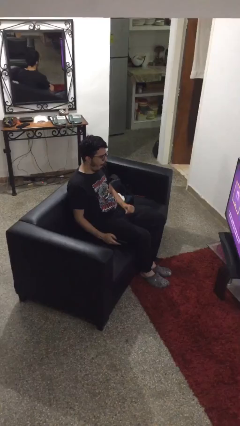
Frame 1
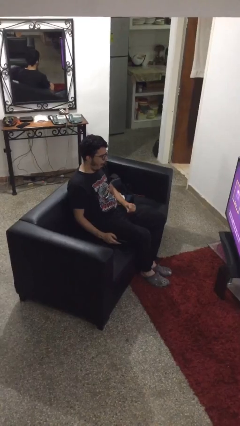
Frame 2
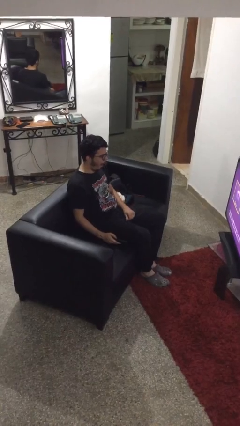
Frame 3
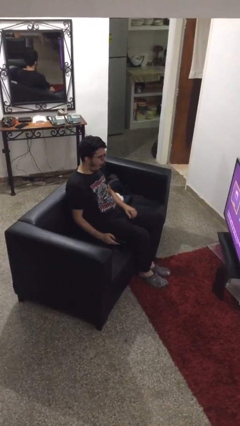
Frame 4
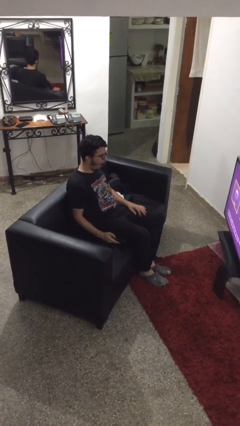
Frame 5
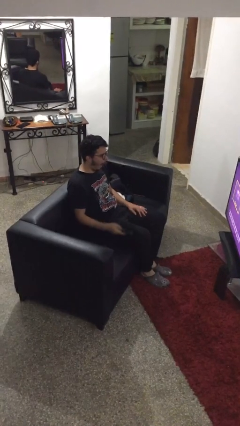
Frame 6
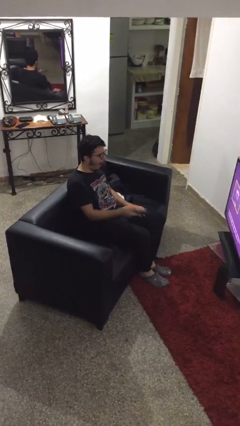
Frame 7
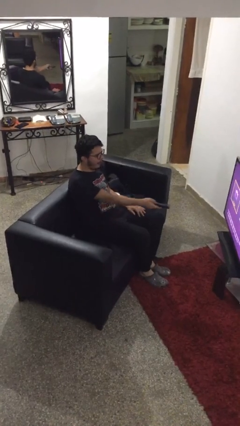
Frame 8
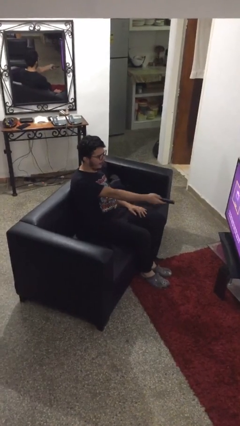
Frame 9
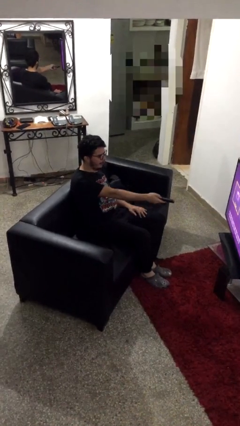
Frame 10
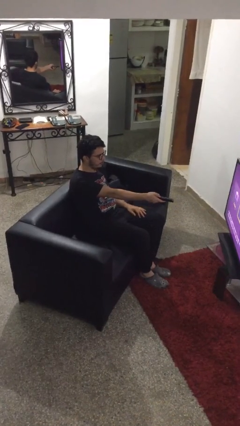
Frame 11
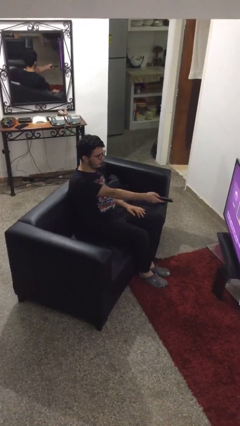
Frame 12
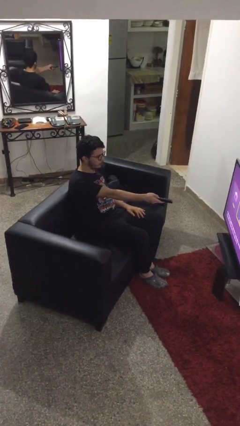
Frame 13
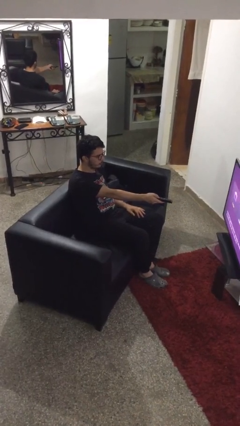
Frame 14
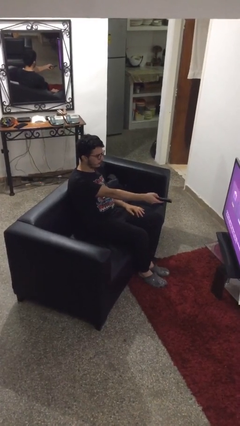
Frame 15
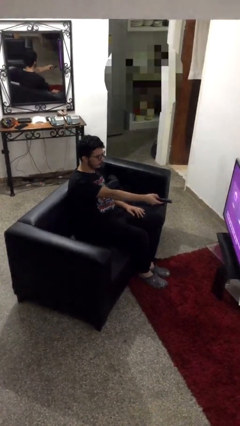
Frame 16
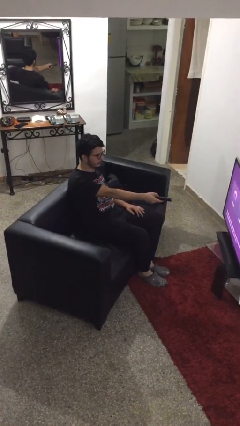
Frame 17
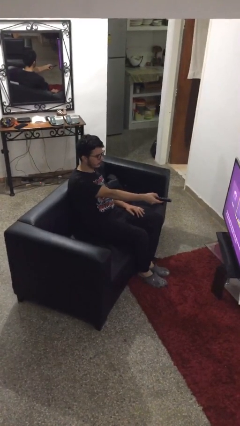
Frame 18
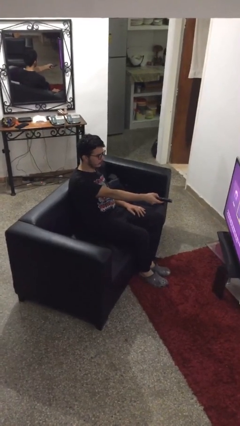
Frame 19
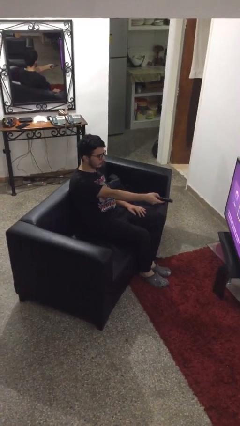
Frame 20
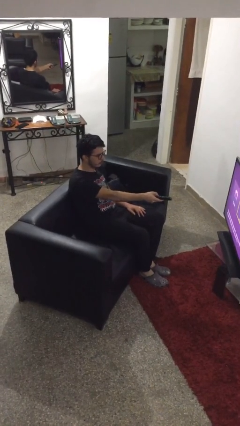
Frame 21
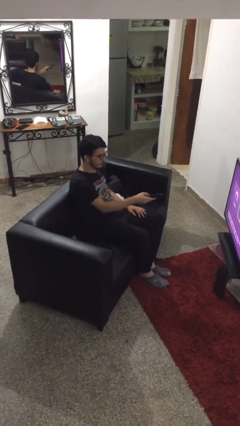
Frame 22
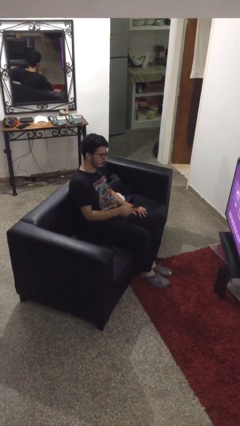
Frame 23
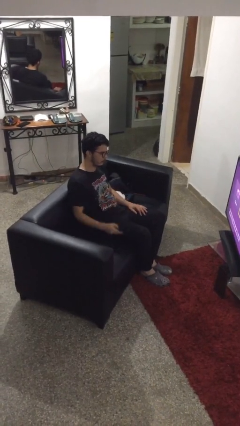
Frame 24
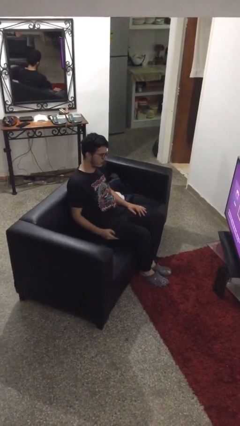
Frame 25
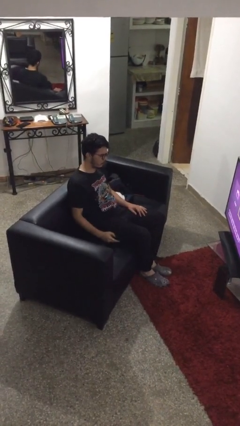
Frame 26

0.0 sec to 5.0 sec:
person uses television remote

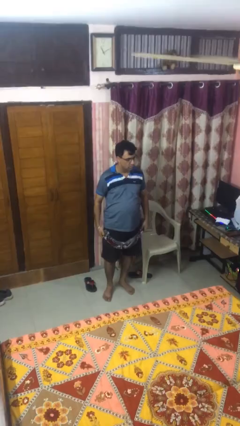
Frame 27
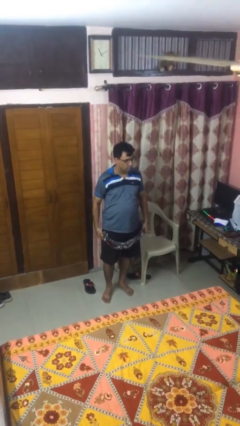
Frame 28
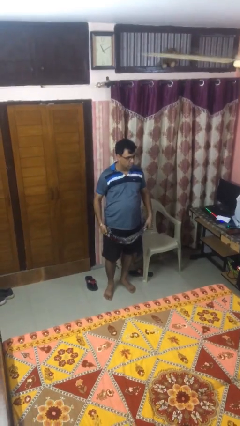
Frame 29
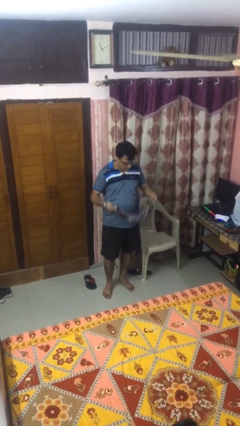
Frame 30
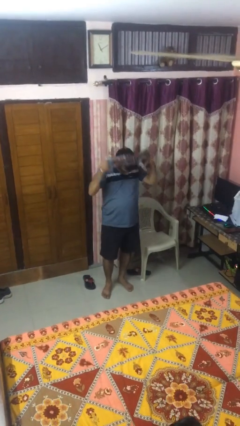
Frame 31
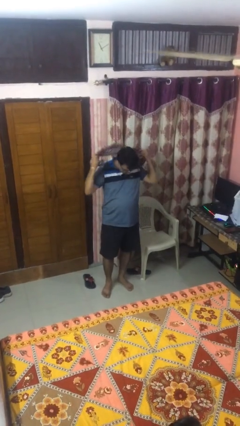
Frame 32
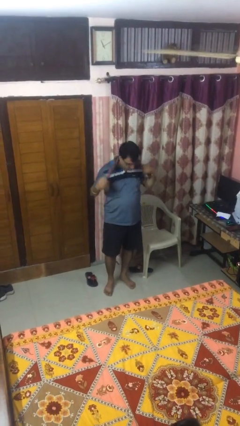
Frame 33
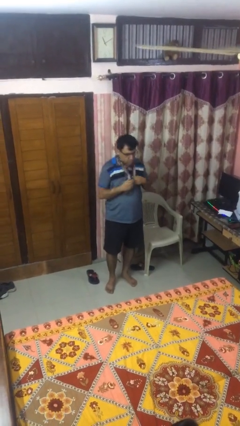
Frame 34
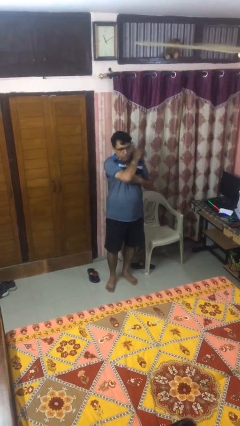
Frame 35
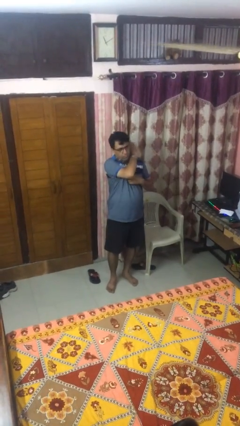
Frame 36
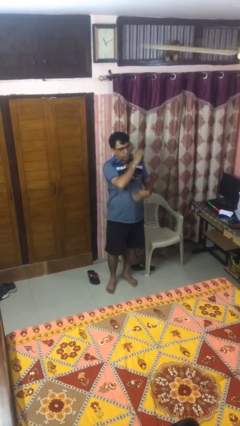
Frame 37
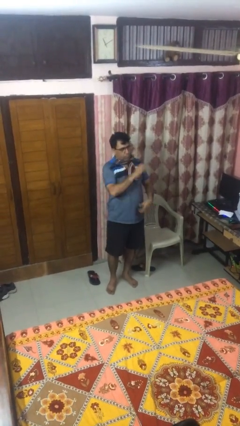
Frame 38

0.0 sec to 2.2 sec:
person puts on scarf

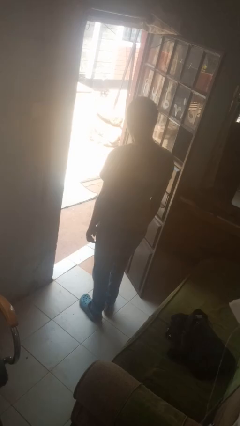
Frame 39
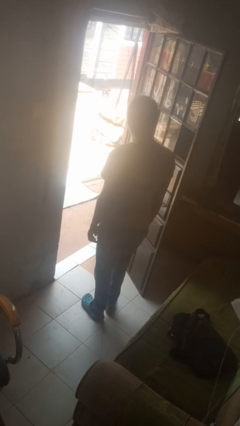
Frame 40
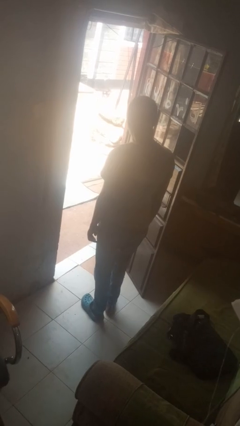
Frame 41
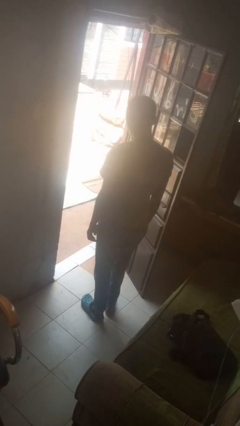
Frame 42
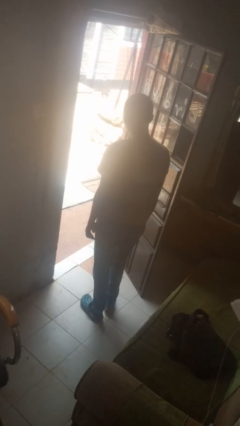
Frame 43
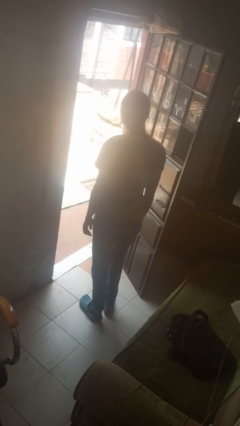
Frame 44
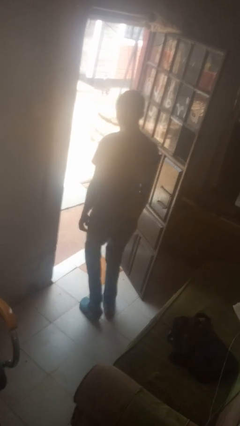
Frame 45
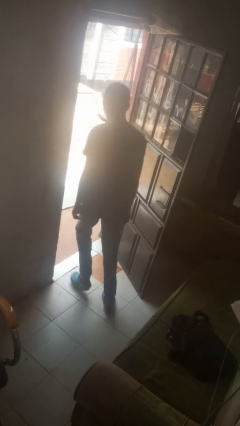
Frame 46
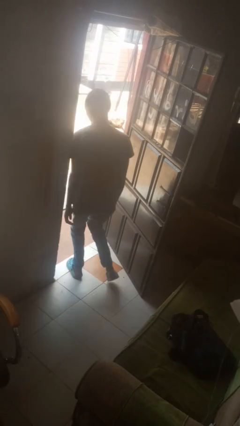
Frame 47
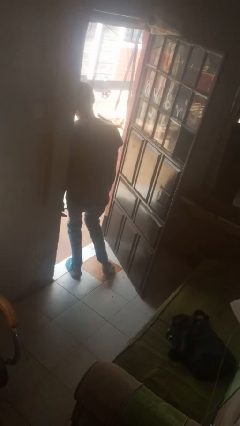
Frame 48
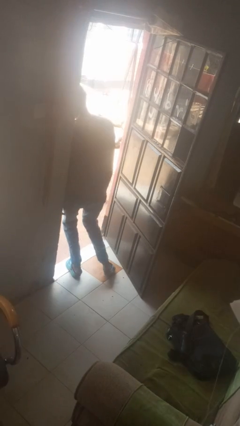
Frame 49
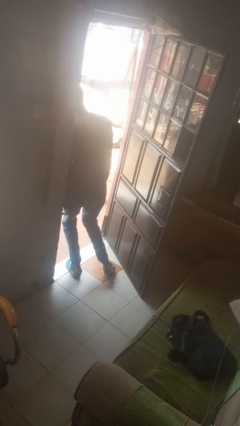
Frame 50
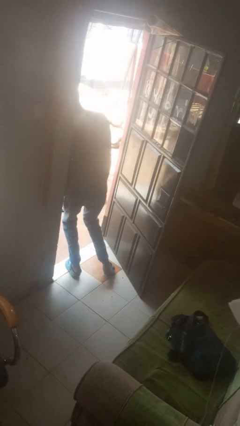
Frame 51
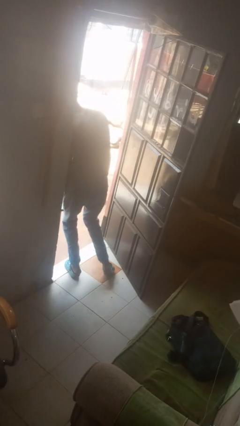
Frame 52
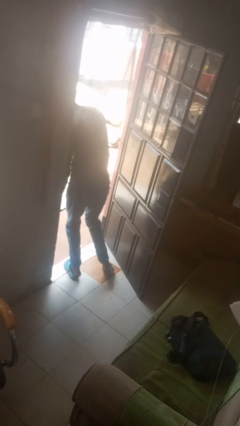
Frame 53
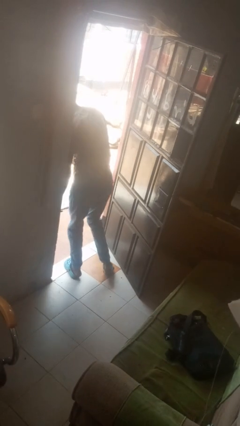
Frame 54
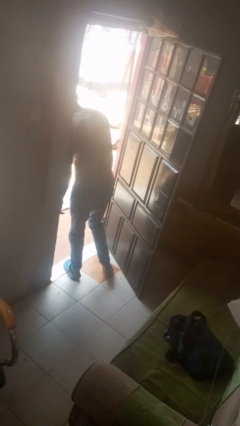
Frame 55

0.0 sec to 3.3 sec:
person bumps into wall

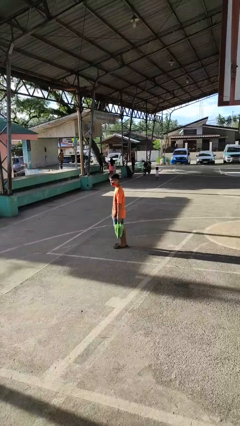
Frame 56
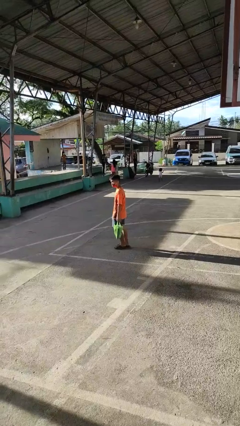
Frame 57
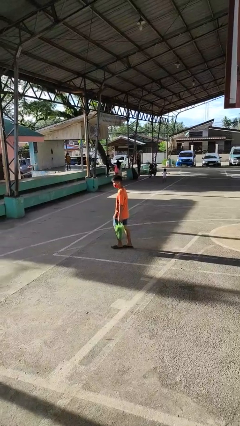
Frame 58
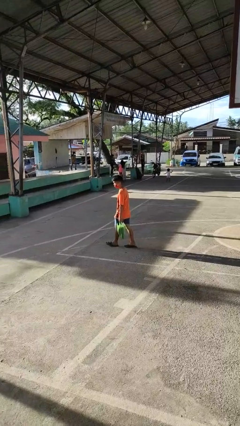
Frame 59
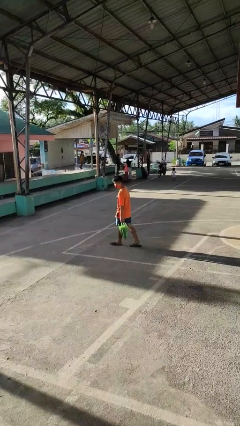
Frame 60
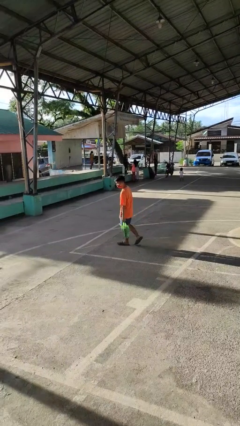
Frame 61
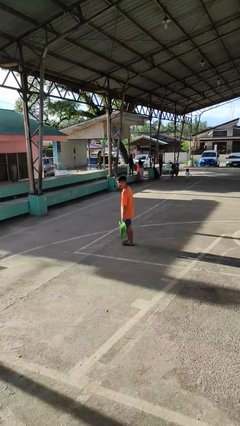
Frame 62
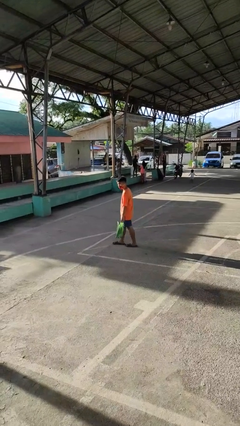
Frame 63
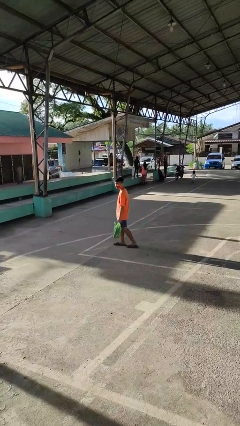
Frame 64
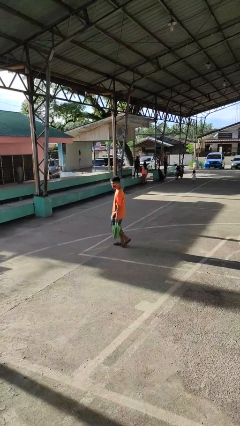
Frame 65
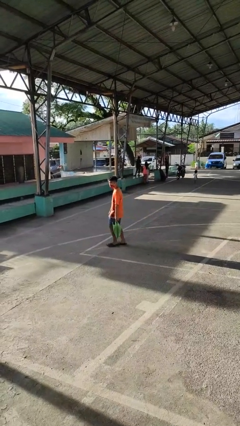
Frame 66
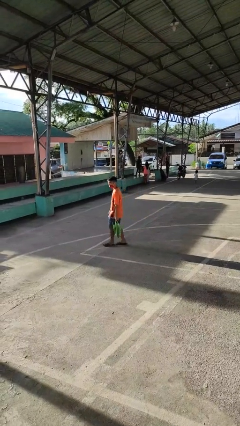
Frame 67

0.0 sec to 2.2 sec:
person carries groceries

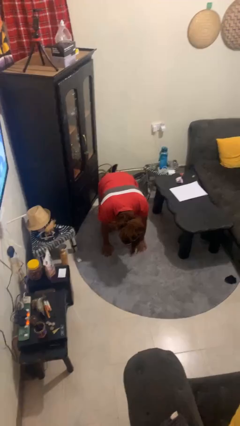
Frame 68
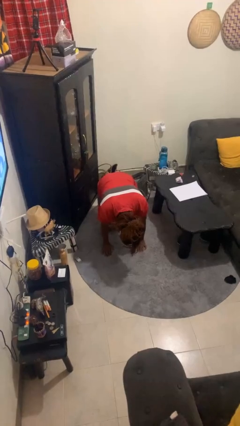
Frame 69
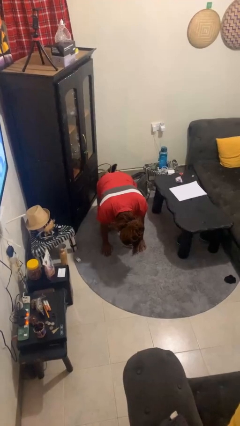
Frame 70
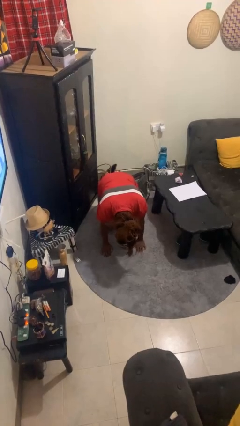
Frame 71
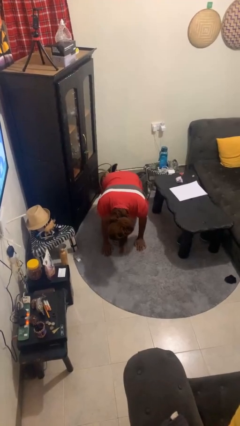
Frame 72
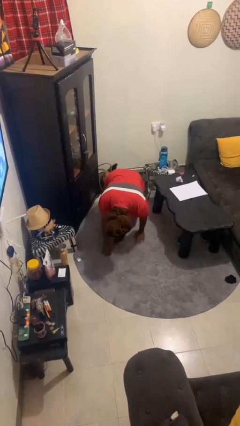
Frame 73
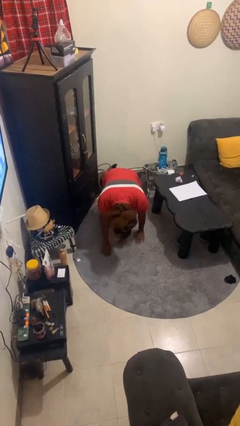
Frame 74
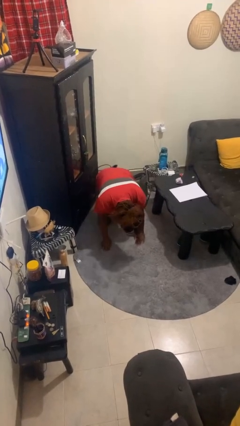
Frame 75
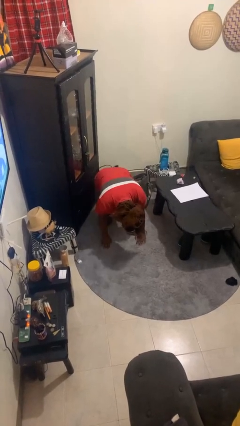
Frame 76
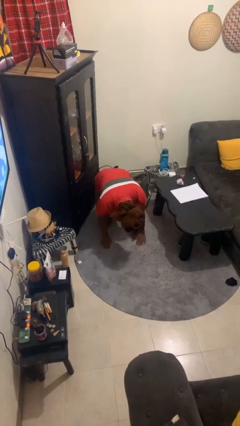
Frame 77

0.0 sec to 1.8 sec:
person crawls

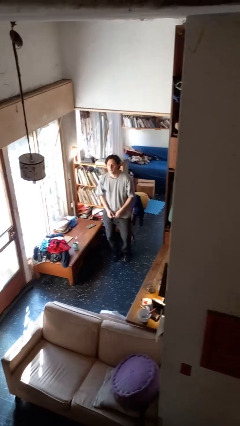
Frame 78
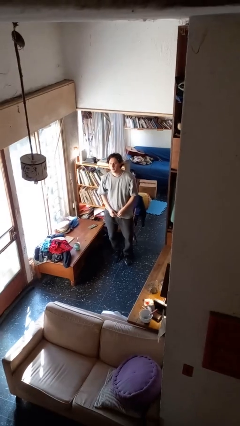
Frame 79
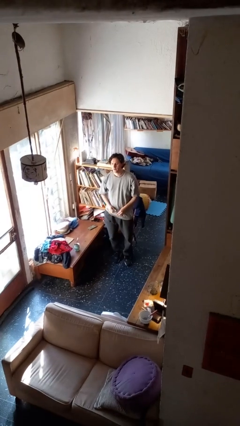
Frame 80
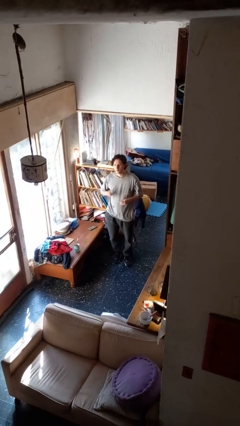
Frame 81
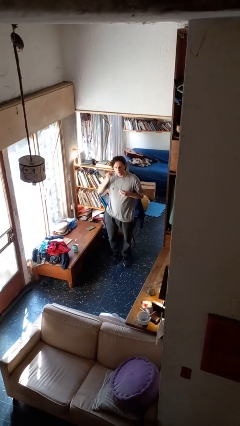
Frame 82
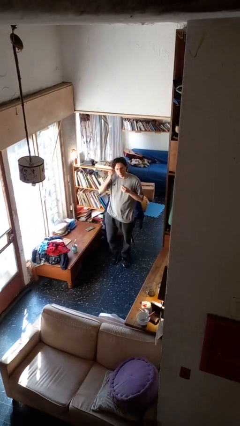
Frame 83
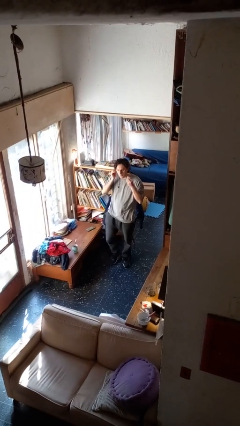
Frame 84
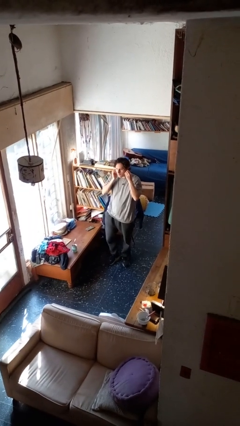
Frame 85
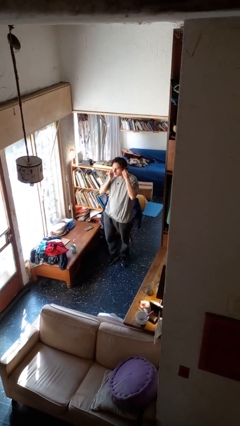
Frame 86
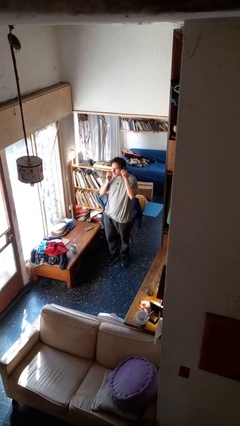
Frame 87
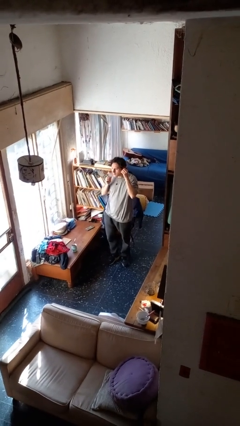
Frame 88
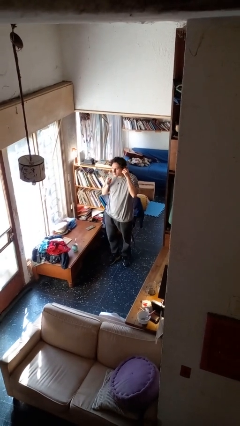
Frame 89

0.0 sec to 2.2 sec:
person puts on headphones

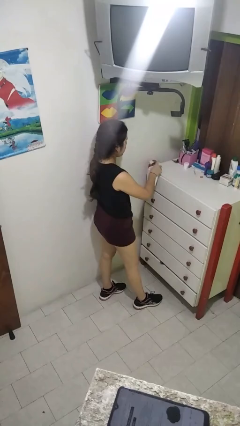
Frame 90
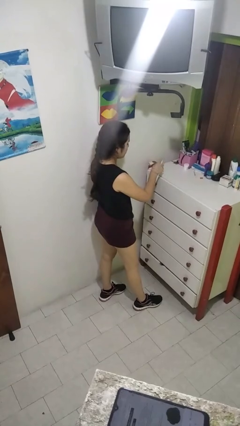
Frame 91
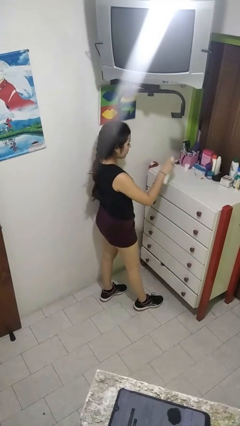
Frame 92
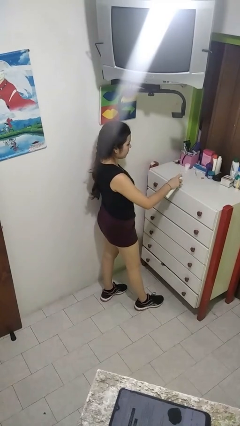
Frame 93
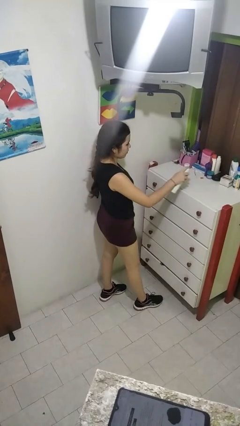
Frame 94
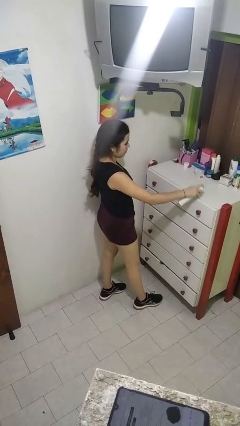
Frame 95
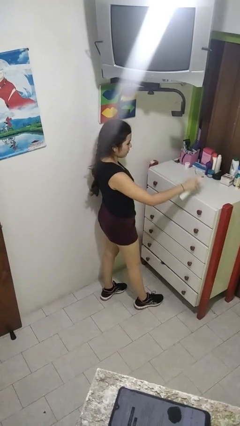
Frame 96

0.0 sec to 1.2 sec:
person sprays from bottle
